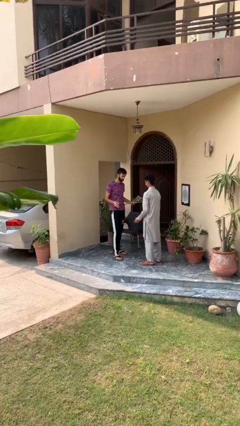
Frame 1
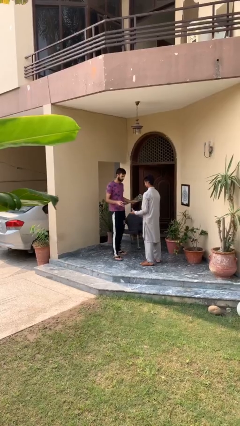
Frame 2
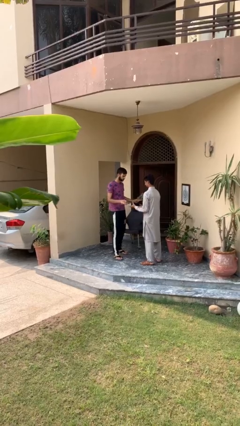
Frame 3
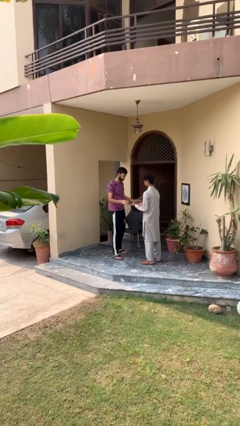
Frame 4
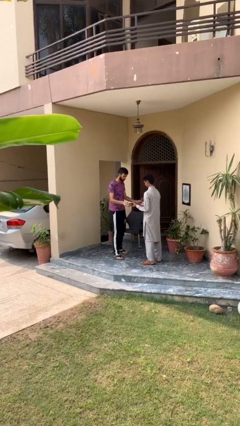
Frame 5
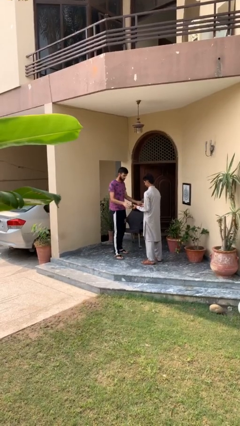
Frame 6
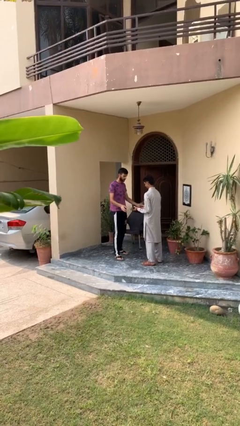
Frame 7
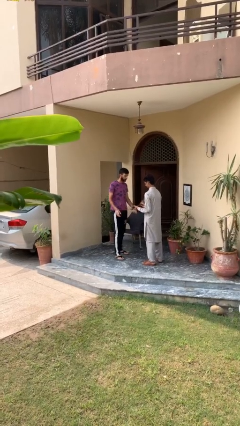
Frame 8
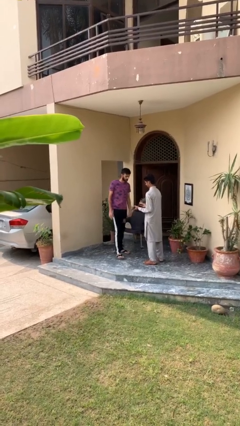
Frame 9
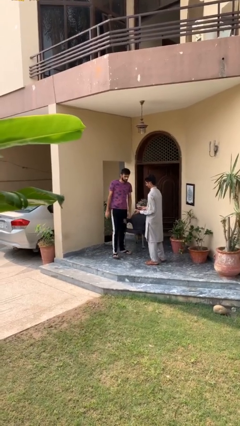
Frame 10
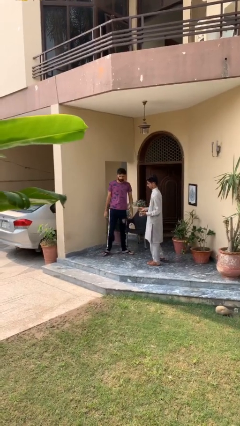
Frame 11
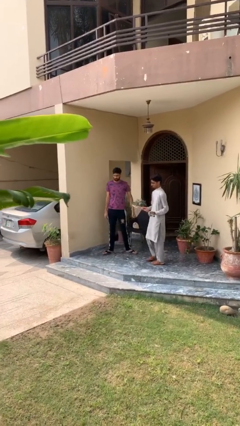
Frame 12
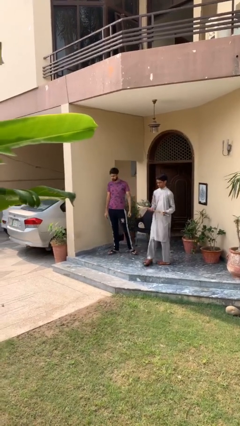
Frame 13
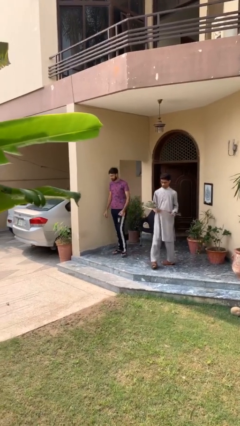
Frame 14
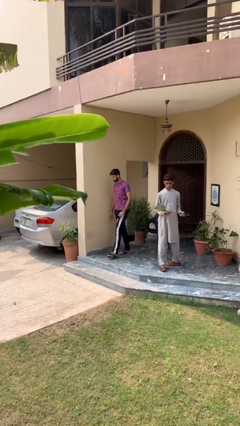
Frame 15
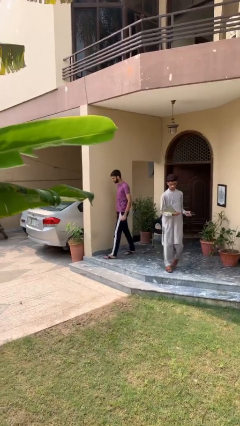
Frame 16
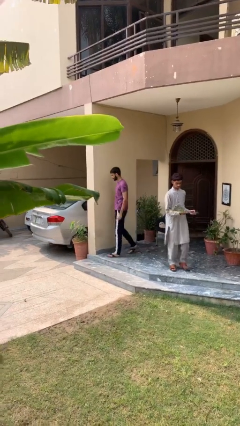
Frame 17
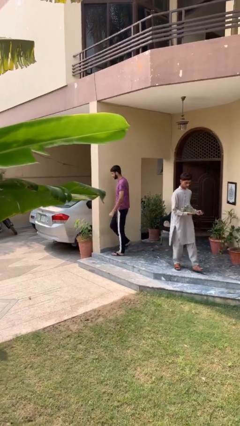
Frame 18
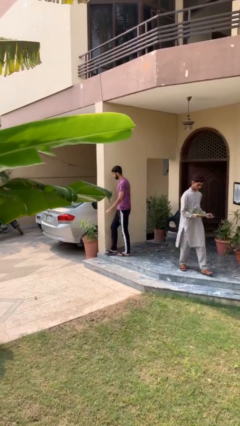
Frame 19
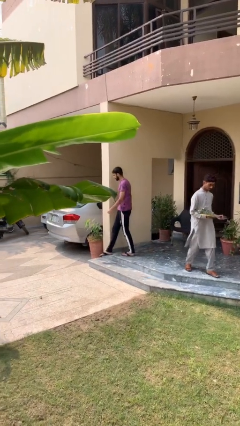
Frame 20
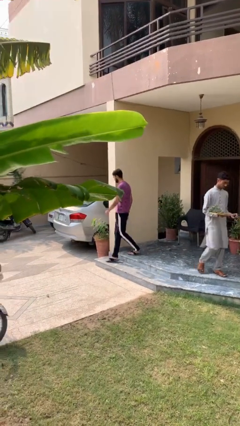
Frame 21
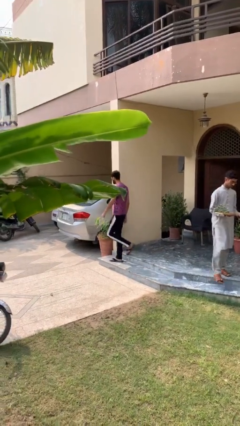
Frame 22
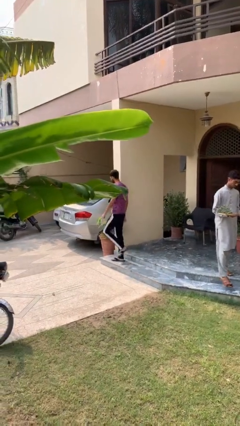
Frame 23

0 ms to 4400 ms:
person transfers object to person

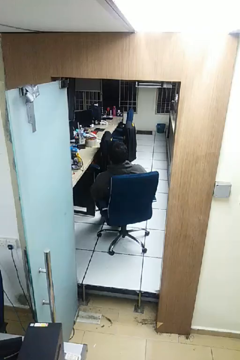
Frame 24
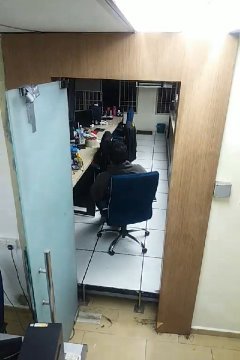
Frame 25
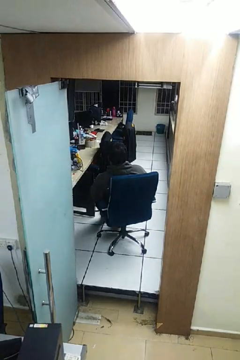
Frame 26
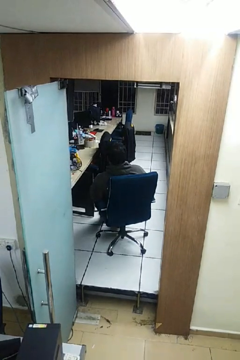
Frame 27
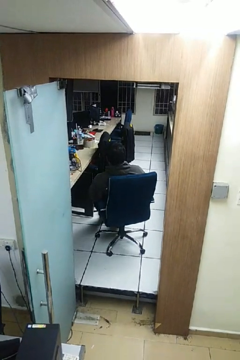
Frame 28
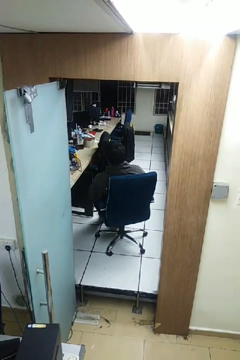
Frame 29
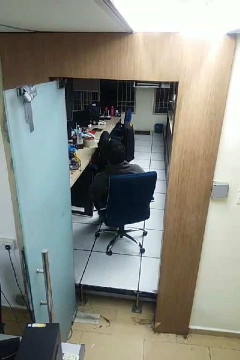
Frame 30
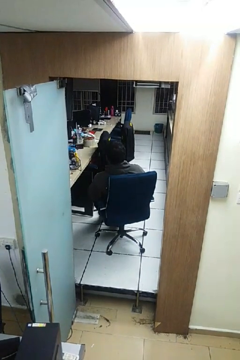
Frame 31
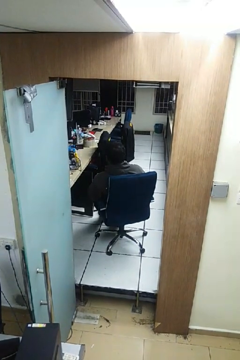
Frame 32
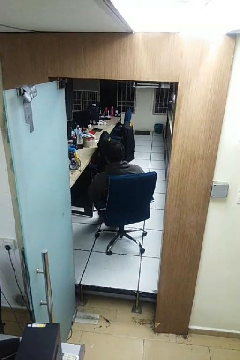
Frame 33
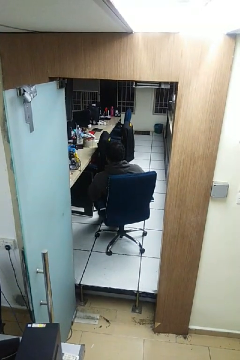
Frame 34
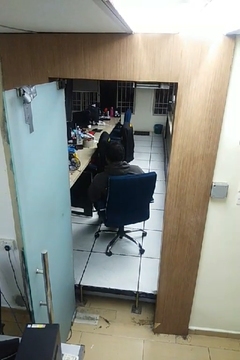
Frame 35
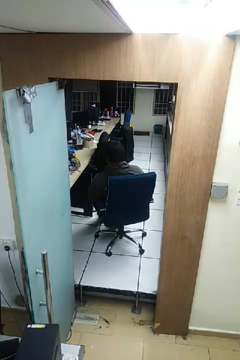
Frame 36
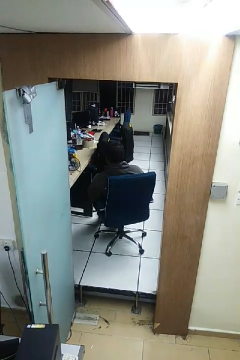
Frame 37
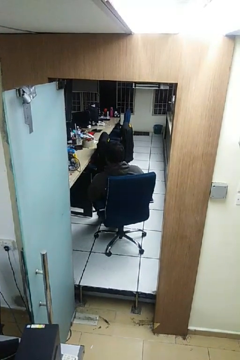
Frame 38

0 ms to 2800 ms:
person nods head

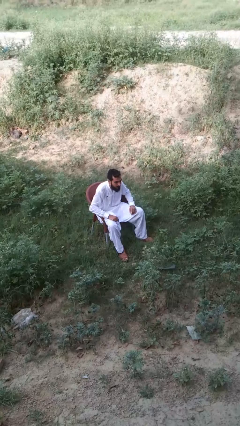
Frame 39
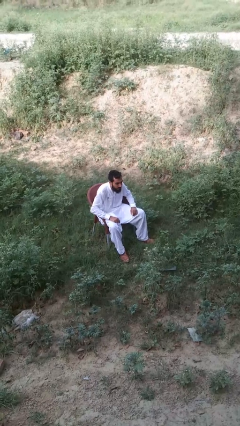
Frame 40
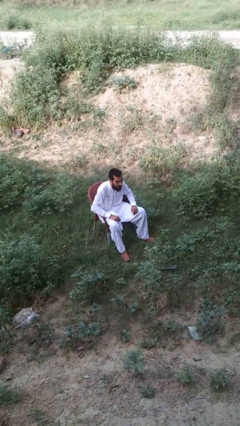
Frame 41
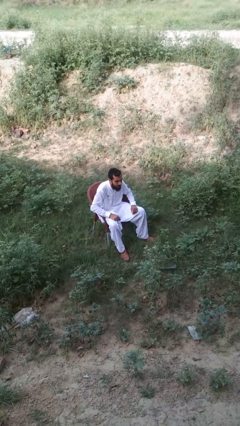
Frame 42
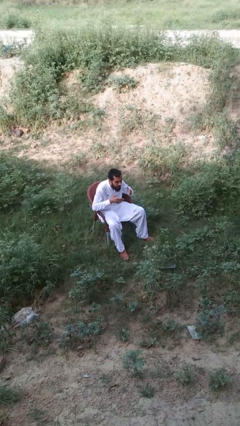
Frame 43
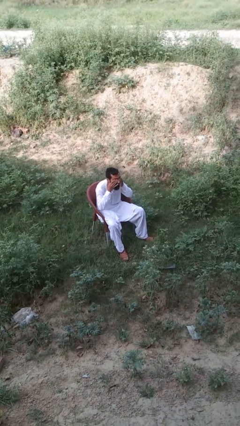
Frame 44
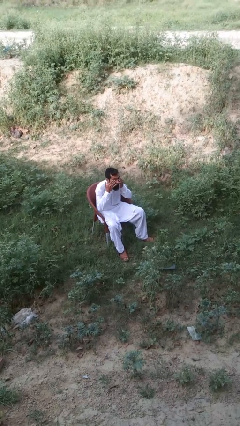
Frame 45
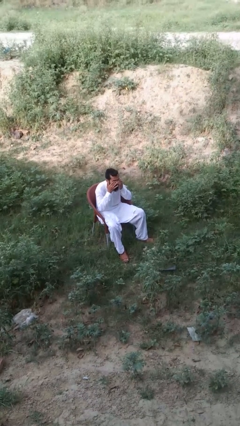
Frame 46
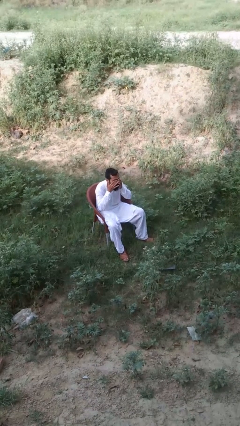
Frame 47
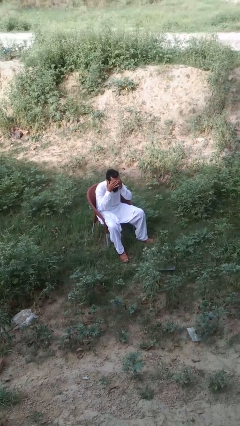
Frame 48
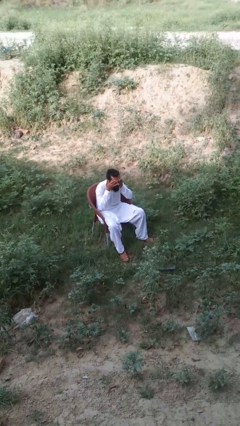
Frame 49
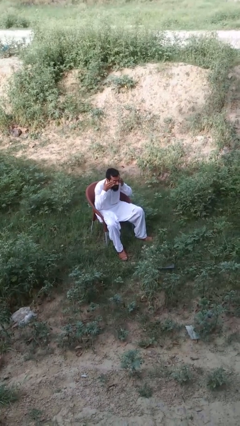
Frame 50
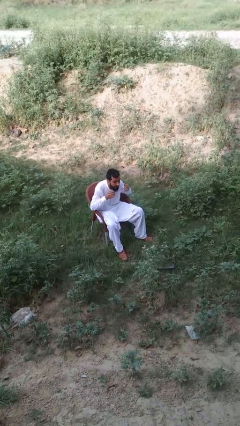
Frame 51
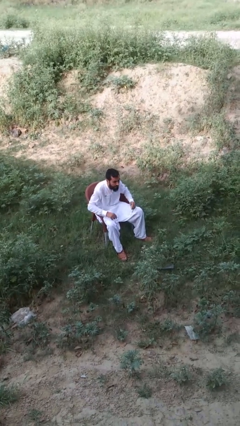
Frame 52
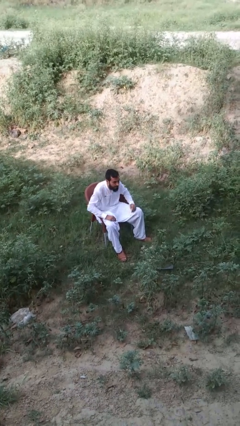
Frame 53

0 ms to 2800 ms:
person rubs eyes

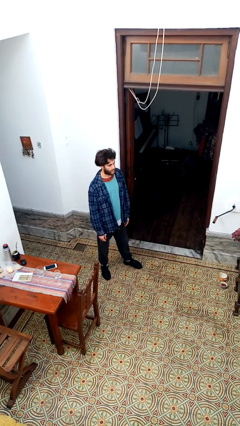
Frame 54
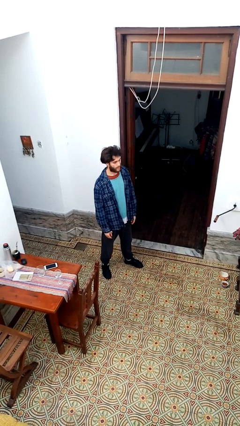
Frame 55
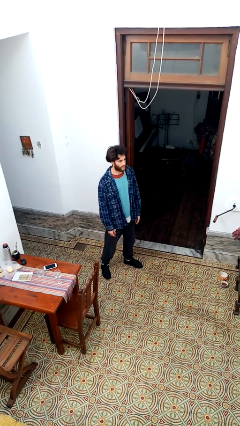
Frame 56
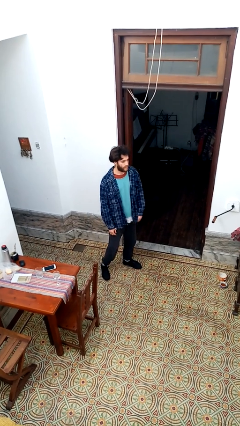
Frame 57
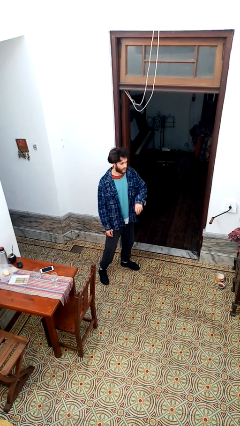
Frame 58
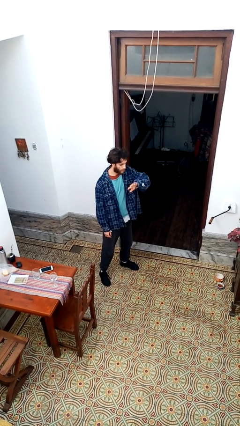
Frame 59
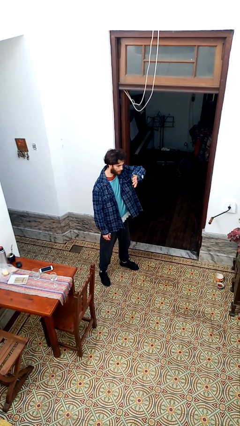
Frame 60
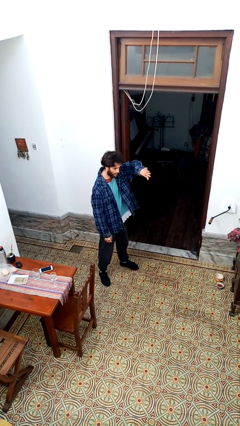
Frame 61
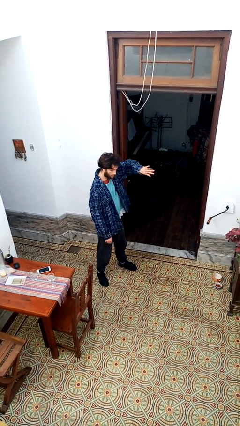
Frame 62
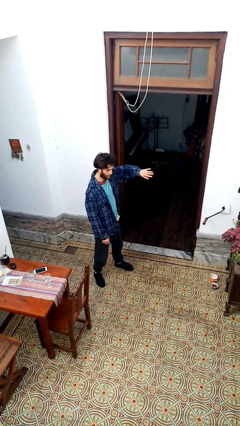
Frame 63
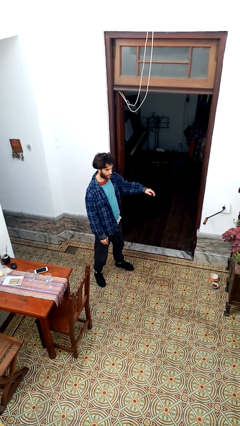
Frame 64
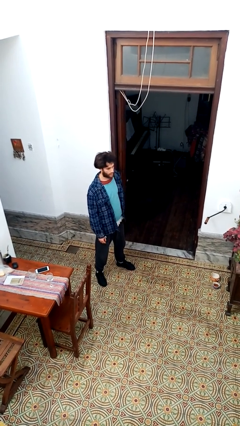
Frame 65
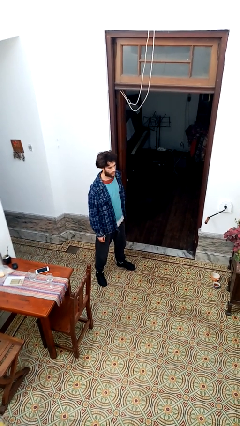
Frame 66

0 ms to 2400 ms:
person gestures swipe left

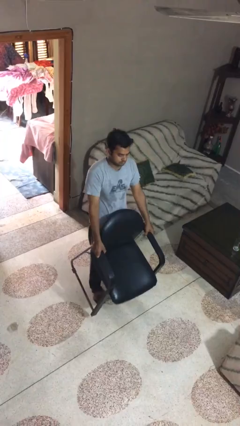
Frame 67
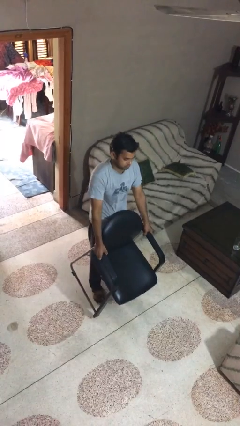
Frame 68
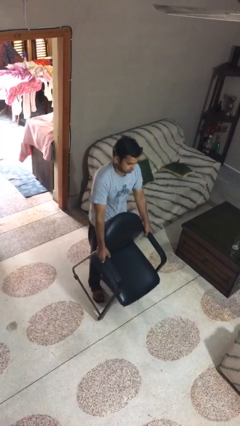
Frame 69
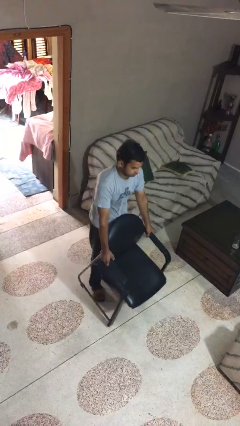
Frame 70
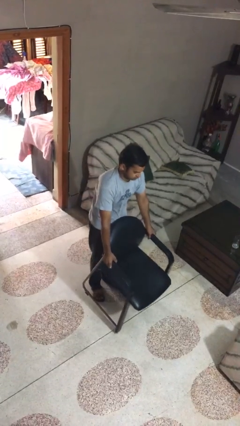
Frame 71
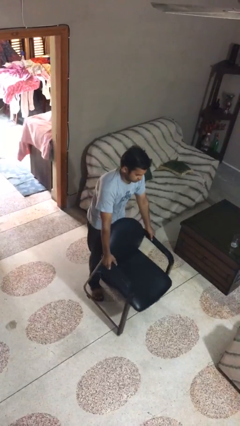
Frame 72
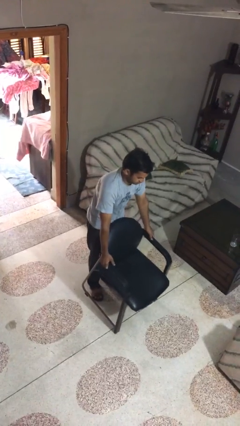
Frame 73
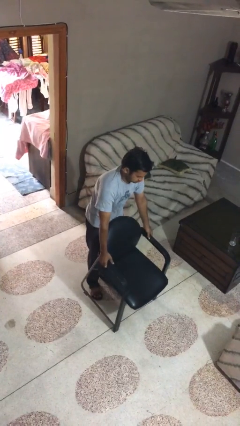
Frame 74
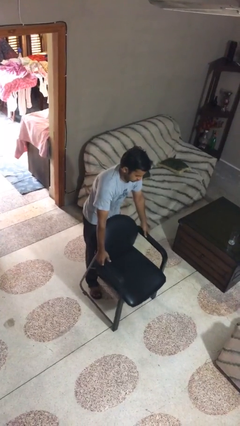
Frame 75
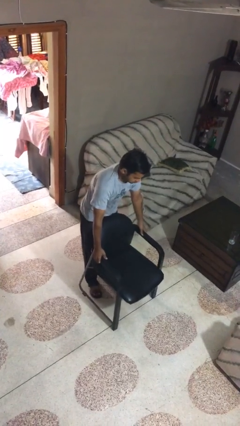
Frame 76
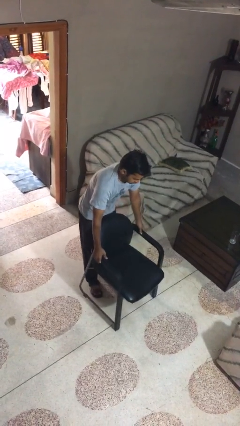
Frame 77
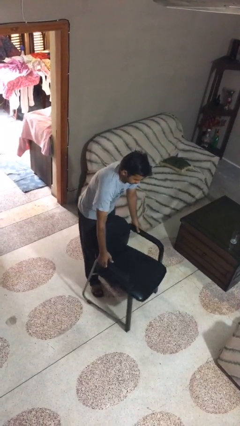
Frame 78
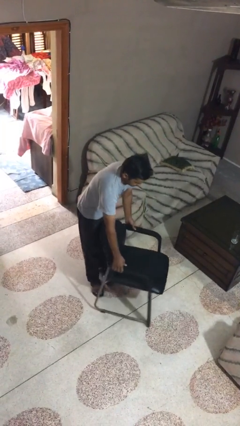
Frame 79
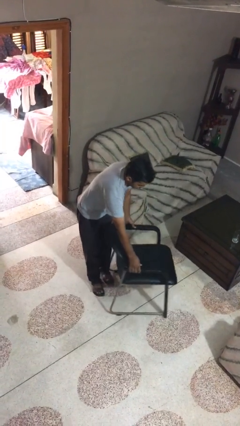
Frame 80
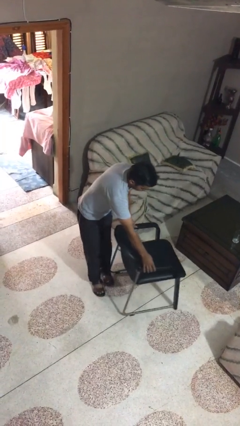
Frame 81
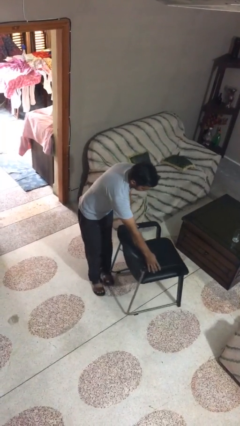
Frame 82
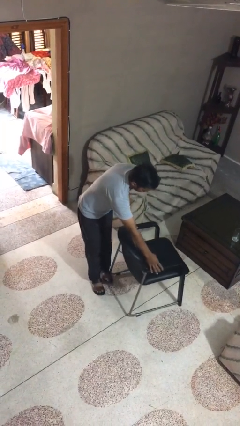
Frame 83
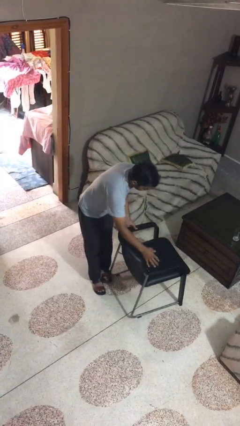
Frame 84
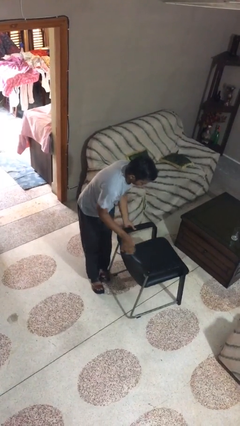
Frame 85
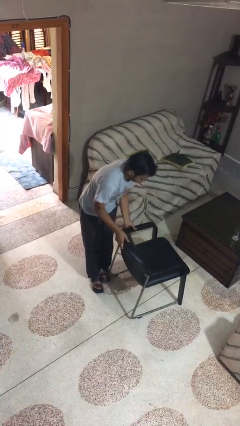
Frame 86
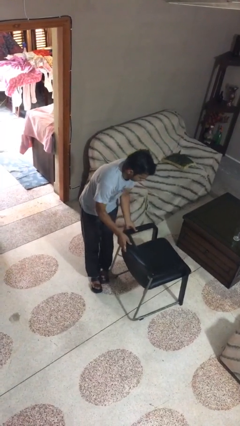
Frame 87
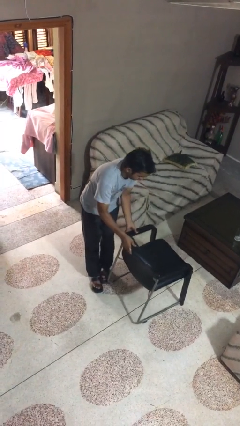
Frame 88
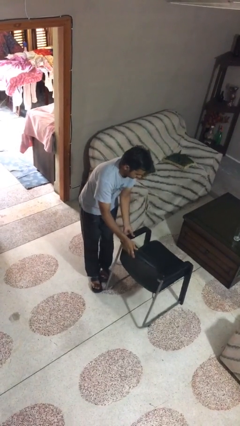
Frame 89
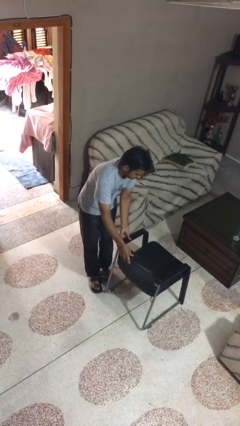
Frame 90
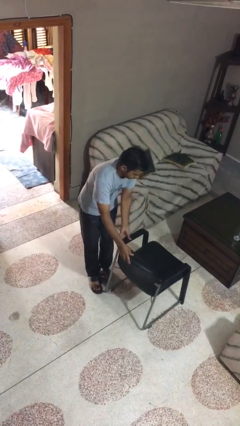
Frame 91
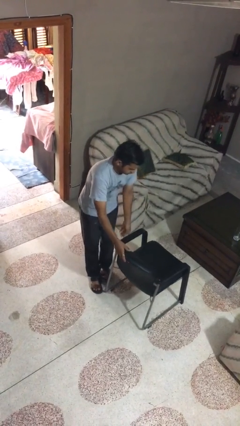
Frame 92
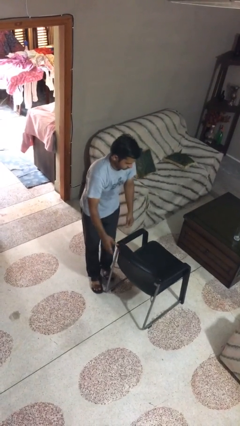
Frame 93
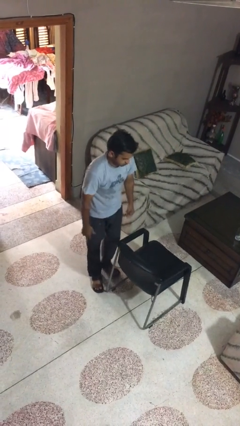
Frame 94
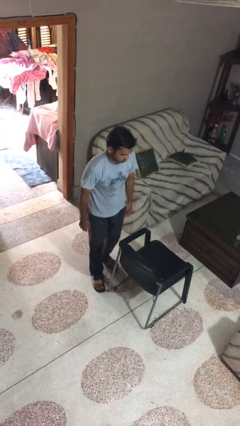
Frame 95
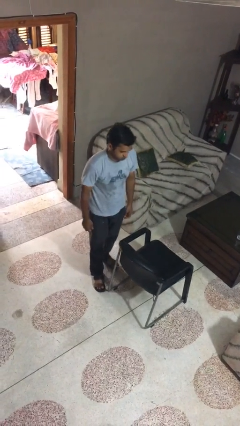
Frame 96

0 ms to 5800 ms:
person puts down object on floor
